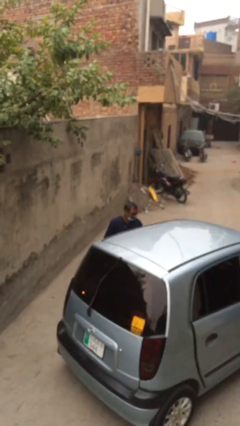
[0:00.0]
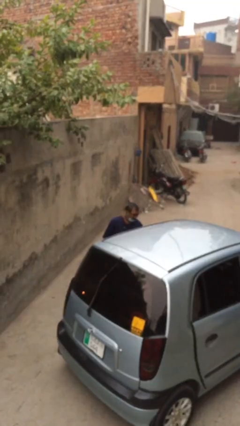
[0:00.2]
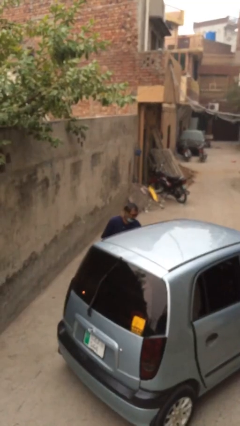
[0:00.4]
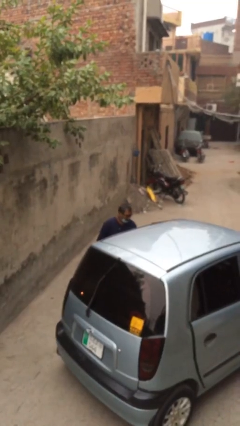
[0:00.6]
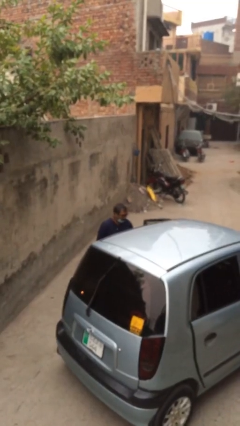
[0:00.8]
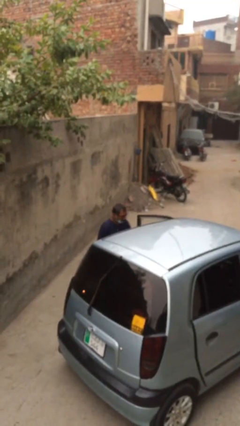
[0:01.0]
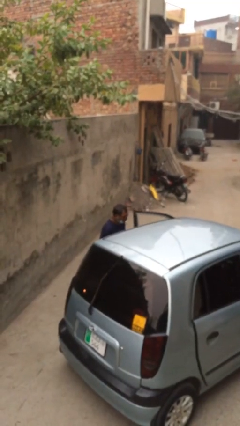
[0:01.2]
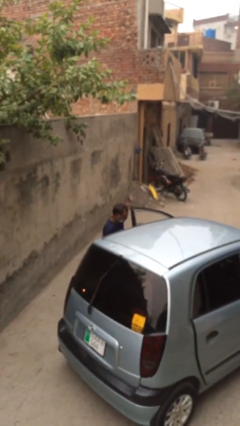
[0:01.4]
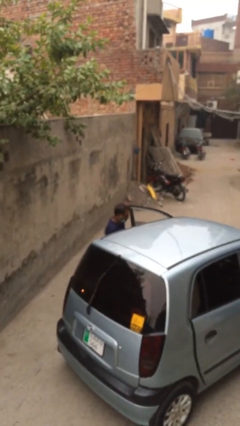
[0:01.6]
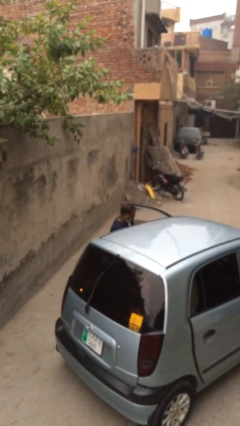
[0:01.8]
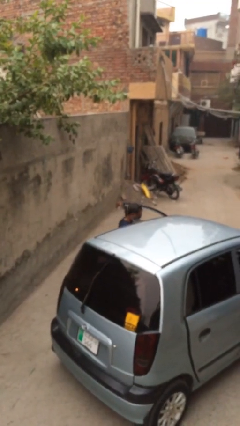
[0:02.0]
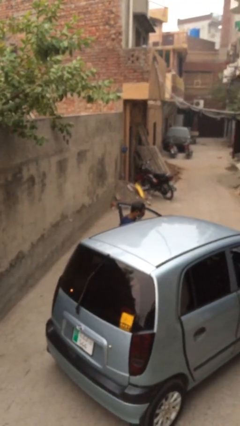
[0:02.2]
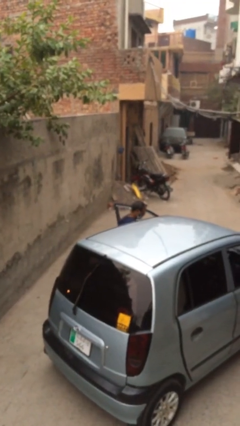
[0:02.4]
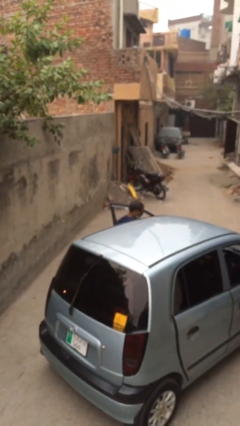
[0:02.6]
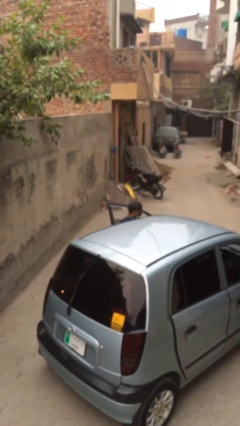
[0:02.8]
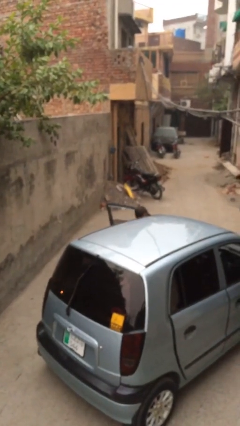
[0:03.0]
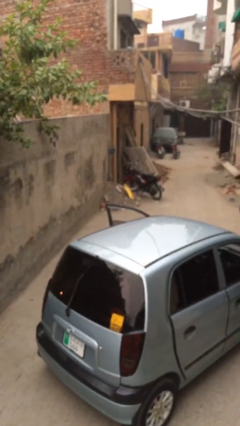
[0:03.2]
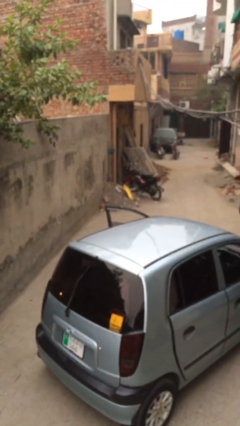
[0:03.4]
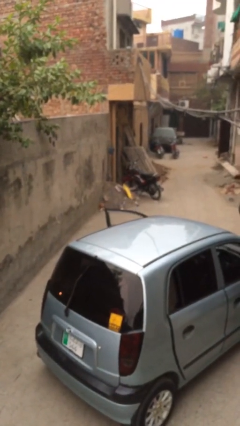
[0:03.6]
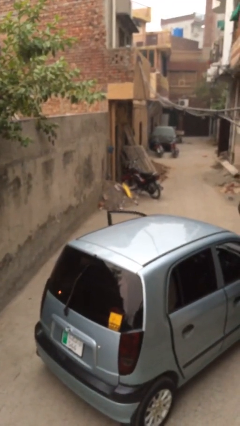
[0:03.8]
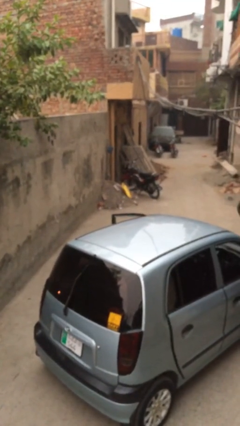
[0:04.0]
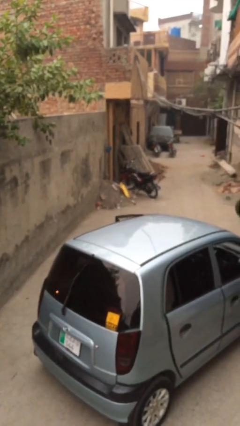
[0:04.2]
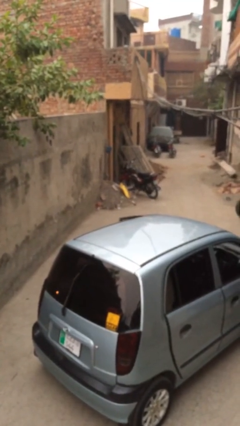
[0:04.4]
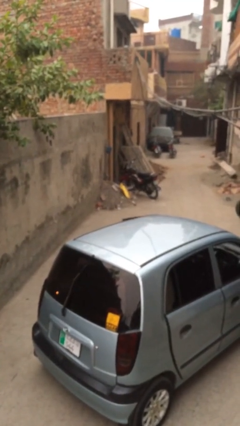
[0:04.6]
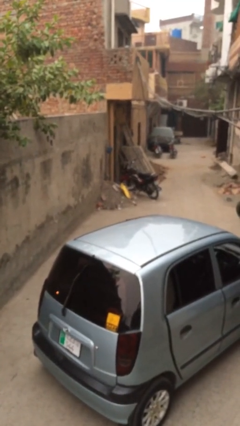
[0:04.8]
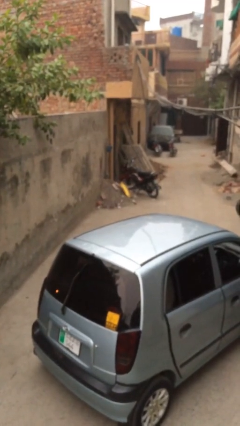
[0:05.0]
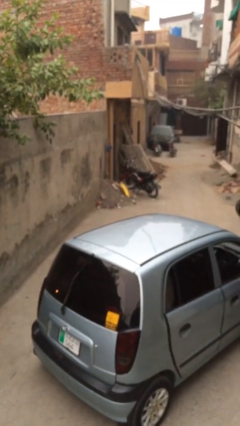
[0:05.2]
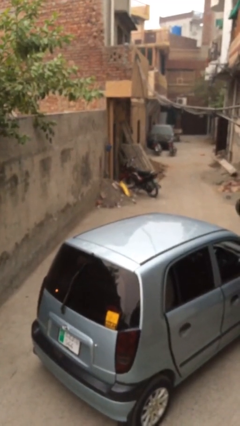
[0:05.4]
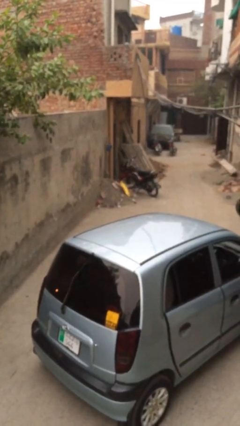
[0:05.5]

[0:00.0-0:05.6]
car picks up person

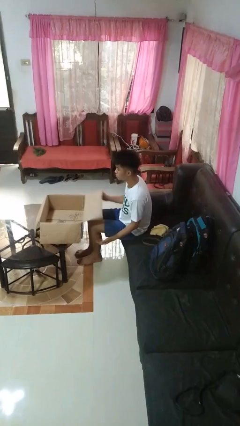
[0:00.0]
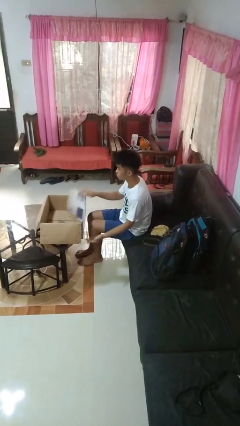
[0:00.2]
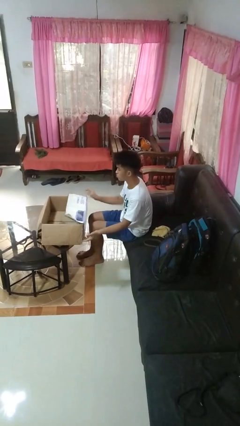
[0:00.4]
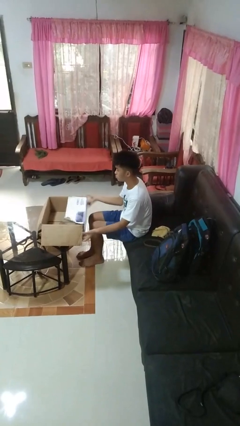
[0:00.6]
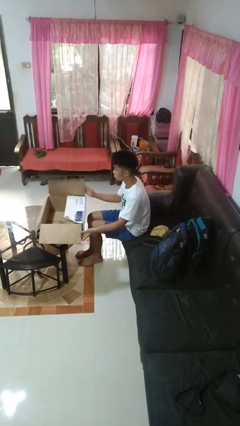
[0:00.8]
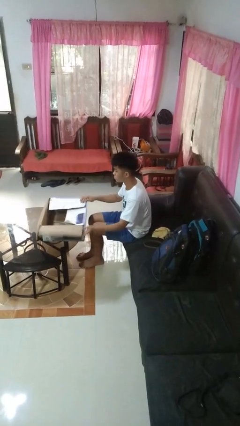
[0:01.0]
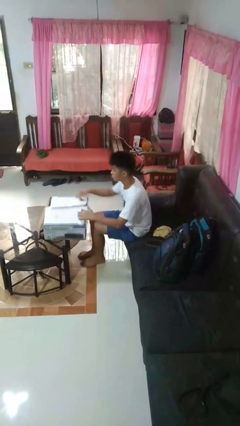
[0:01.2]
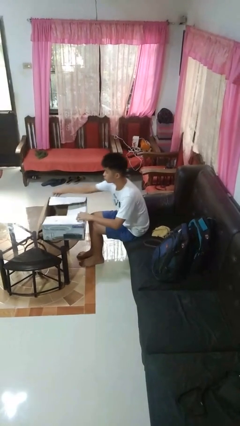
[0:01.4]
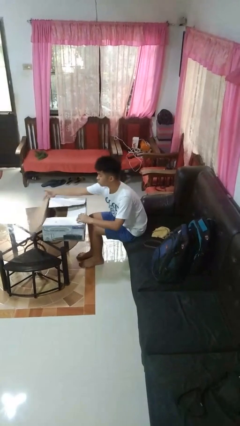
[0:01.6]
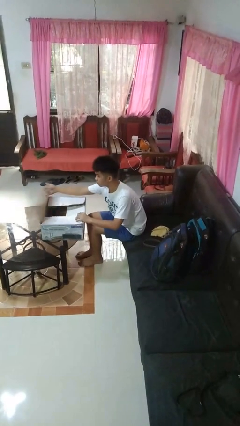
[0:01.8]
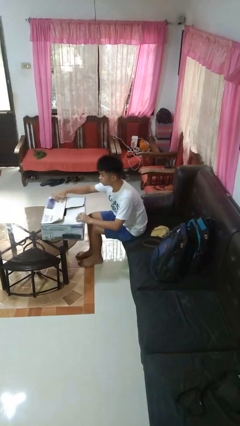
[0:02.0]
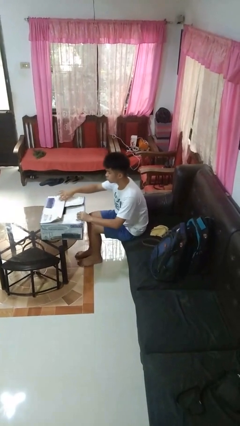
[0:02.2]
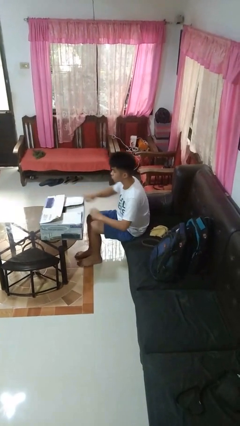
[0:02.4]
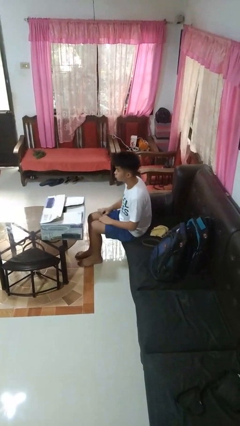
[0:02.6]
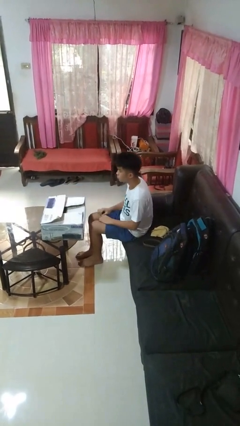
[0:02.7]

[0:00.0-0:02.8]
person closes box

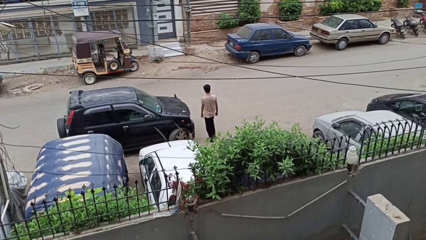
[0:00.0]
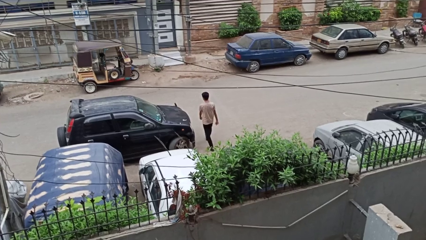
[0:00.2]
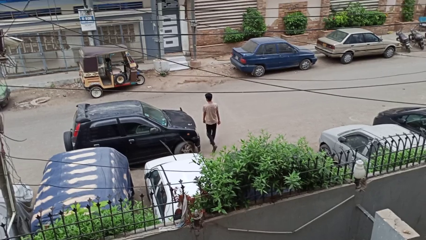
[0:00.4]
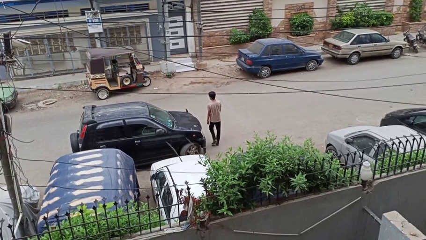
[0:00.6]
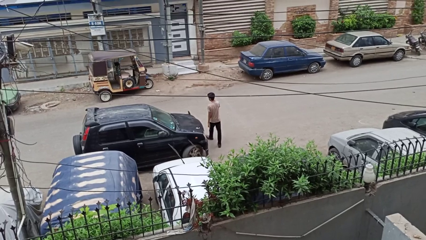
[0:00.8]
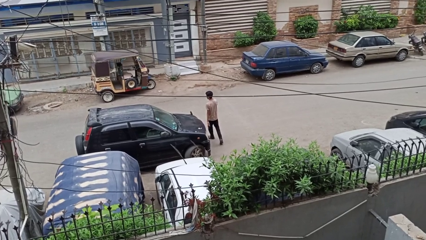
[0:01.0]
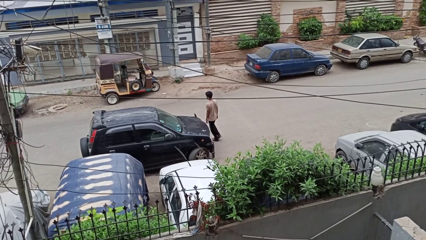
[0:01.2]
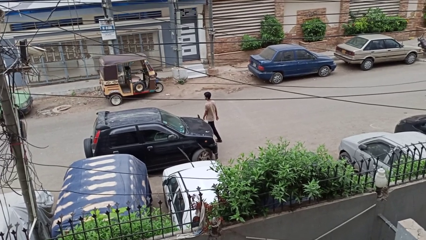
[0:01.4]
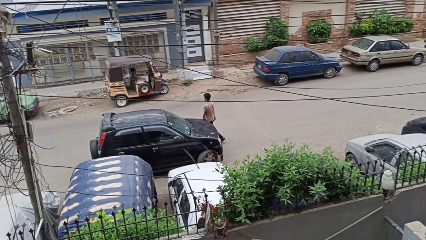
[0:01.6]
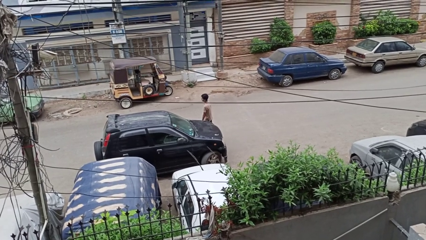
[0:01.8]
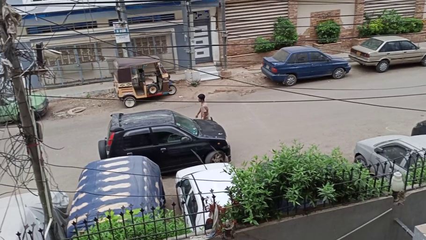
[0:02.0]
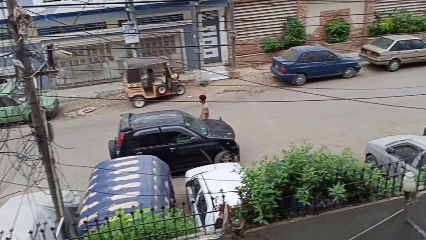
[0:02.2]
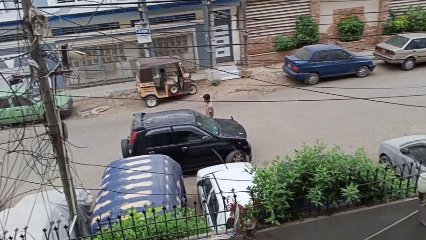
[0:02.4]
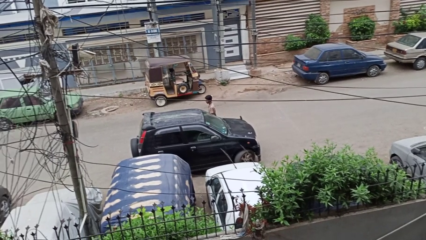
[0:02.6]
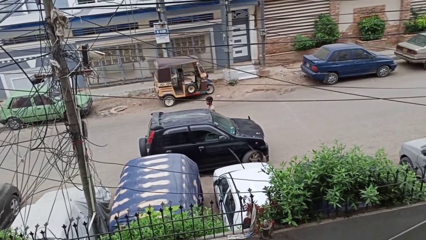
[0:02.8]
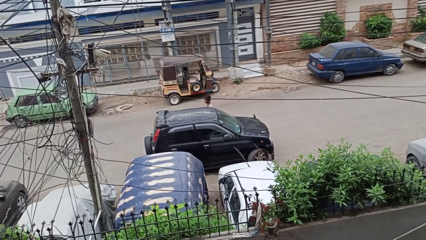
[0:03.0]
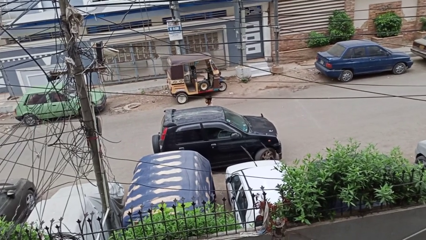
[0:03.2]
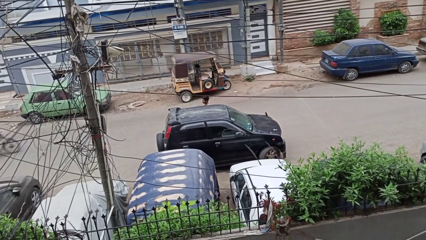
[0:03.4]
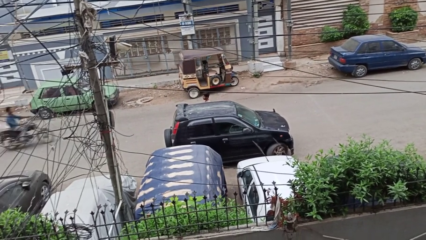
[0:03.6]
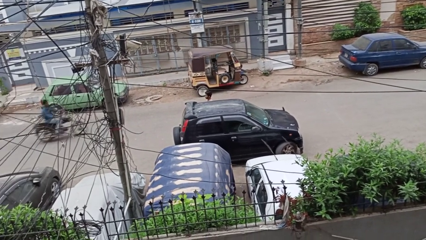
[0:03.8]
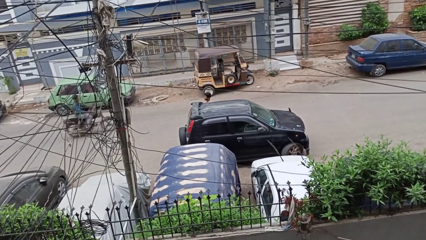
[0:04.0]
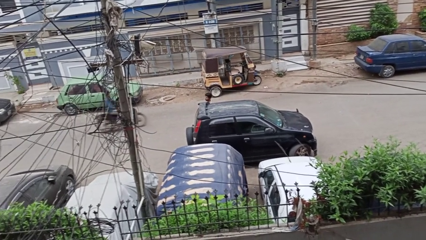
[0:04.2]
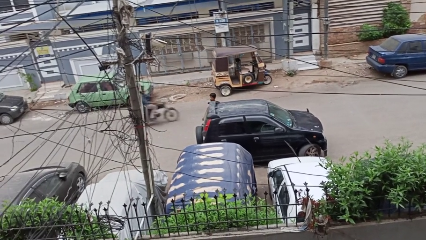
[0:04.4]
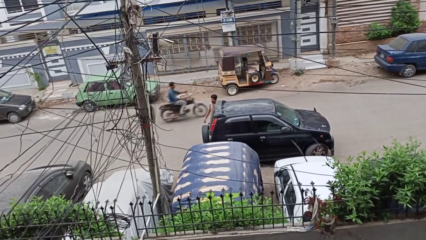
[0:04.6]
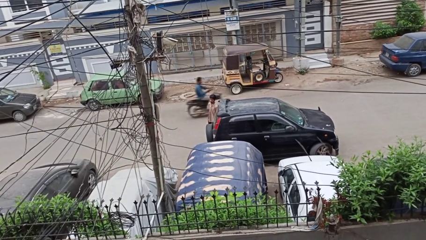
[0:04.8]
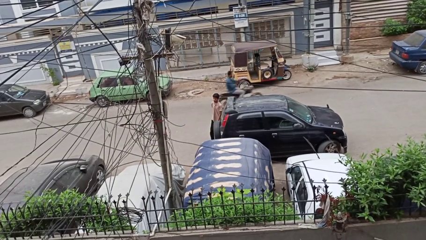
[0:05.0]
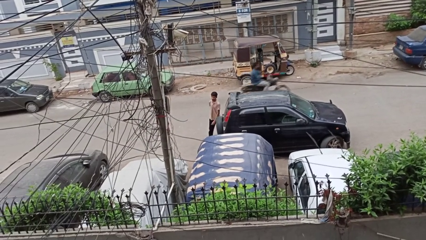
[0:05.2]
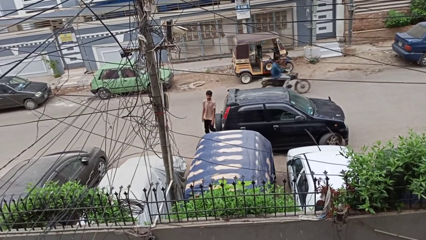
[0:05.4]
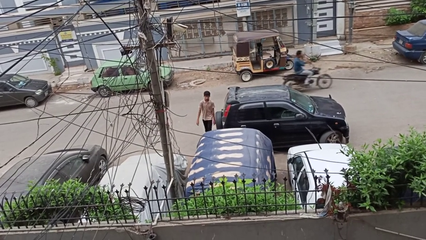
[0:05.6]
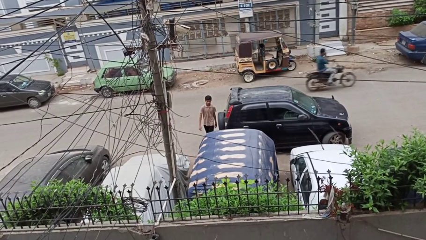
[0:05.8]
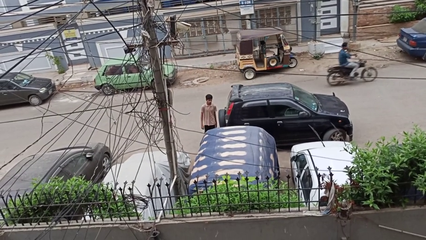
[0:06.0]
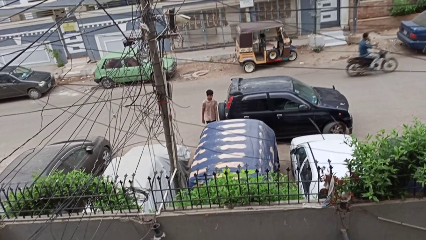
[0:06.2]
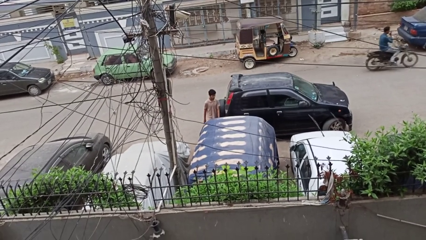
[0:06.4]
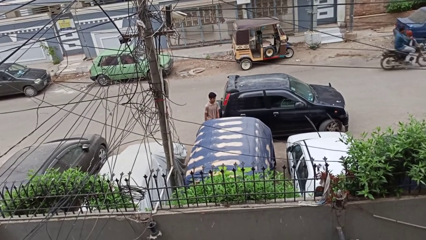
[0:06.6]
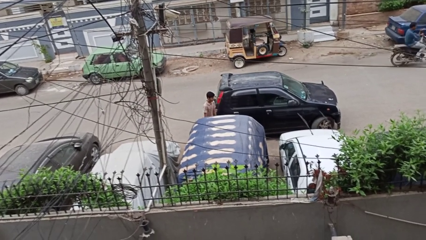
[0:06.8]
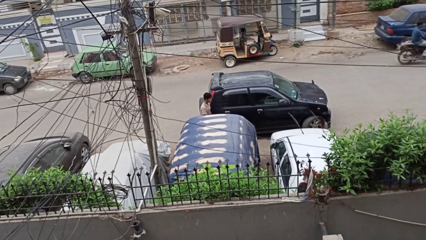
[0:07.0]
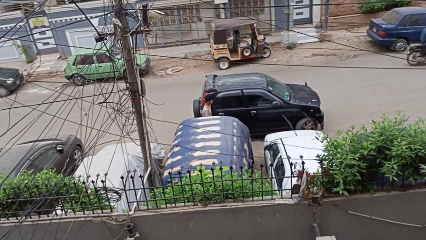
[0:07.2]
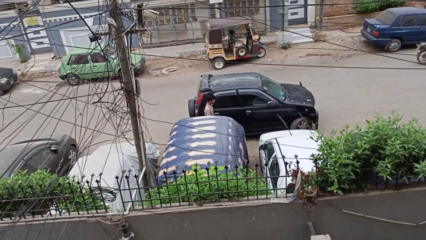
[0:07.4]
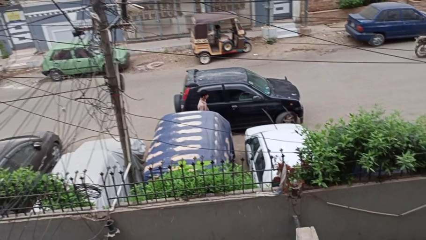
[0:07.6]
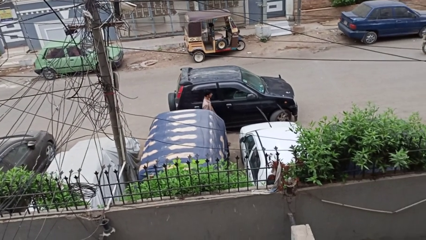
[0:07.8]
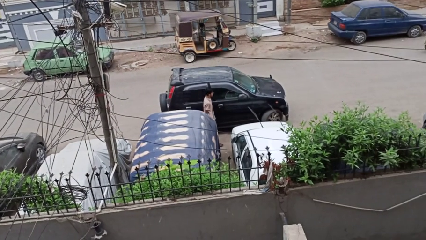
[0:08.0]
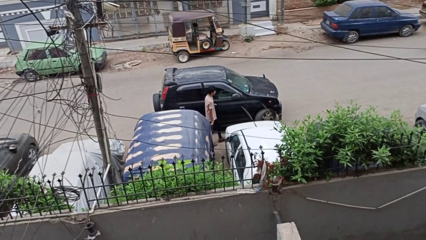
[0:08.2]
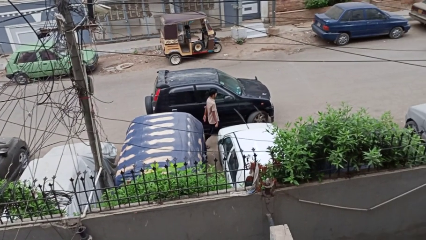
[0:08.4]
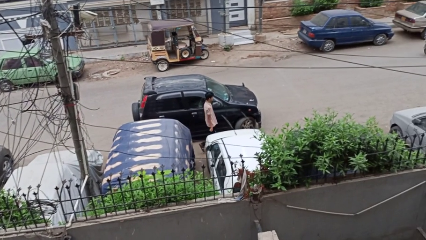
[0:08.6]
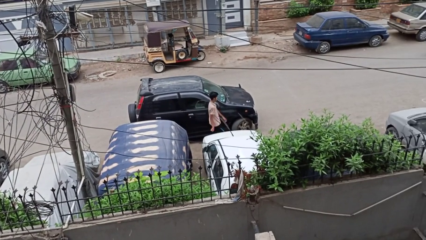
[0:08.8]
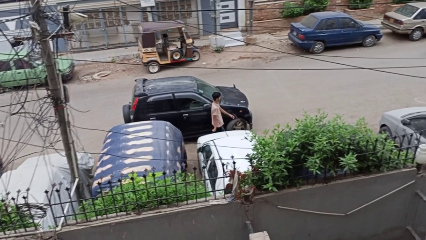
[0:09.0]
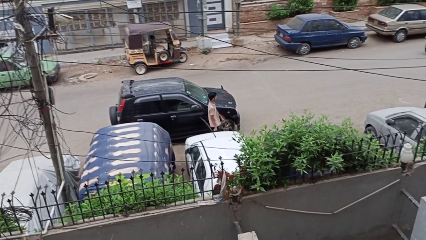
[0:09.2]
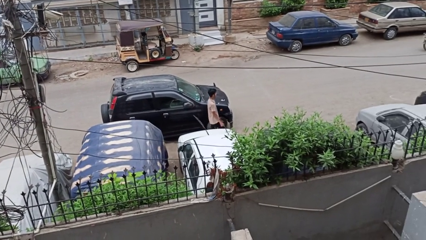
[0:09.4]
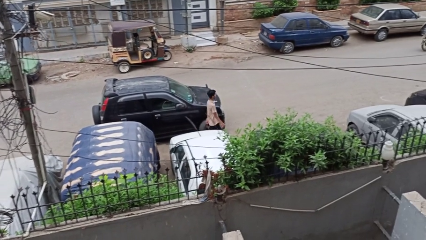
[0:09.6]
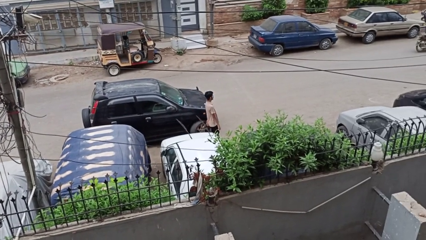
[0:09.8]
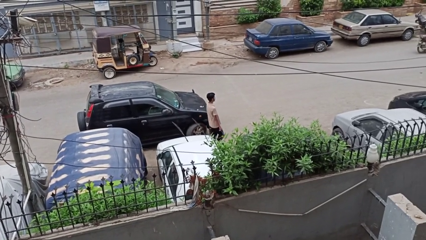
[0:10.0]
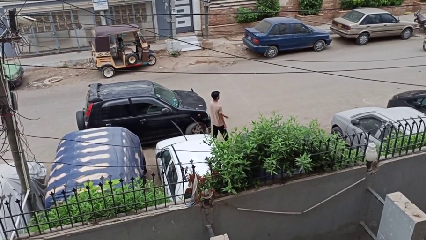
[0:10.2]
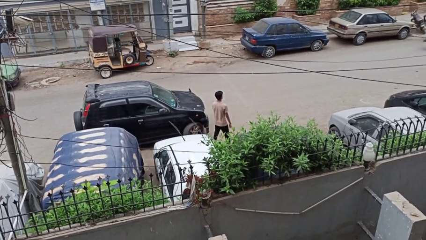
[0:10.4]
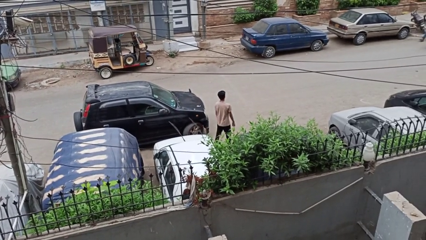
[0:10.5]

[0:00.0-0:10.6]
person walks around car
